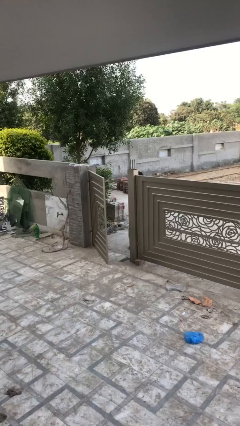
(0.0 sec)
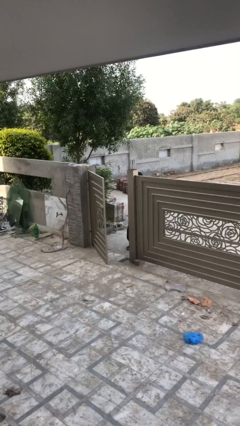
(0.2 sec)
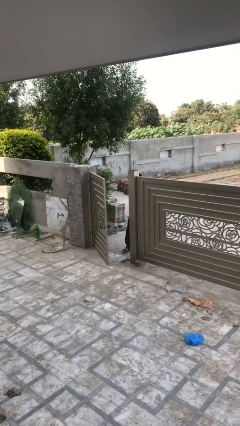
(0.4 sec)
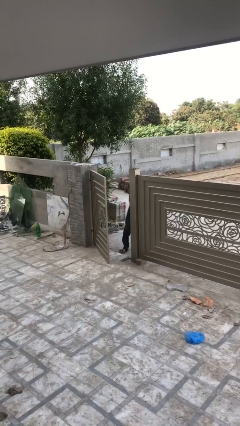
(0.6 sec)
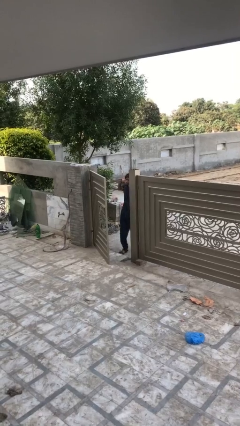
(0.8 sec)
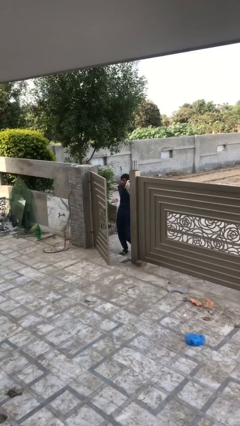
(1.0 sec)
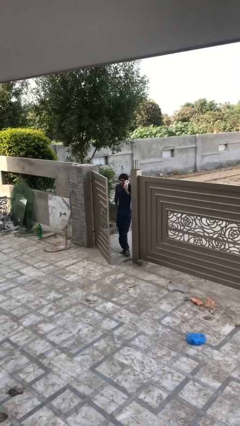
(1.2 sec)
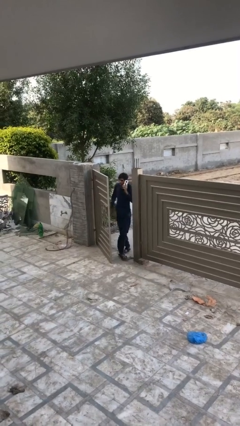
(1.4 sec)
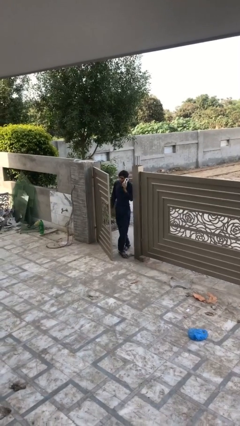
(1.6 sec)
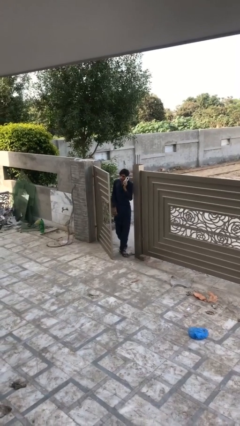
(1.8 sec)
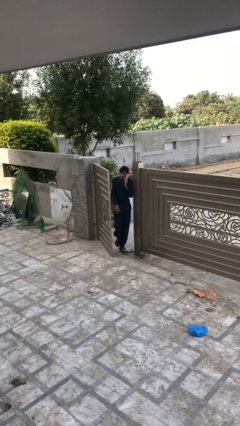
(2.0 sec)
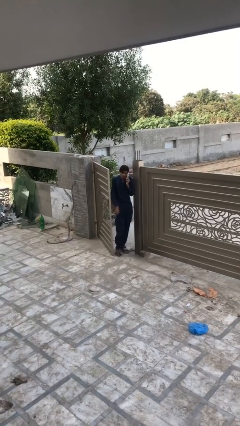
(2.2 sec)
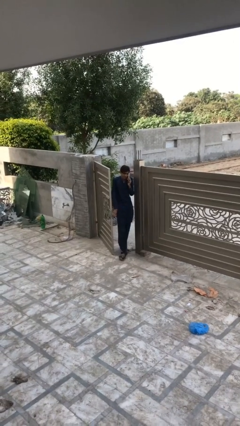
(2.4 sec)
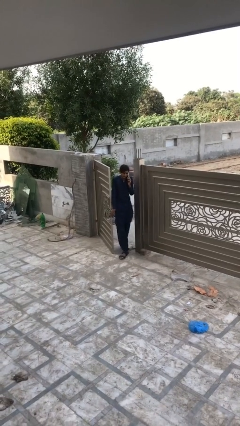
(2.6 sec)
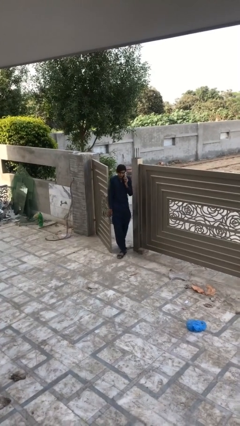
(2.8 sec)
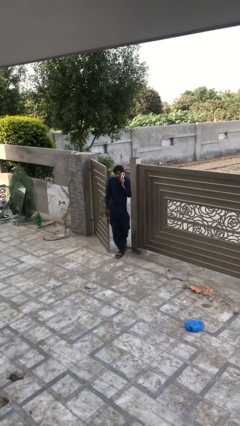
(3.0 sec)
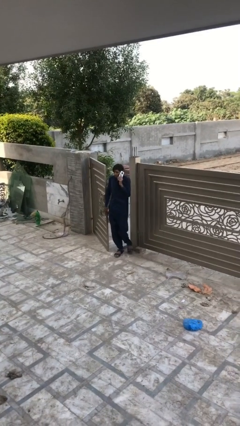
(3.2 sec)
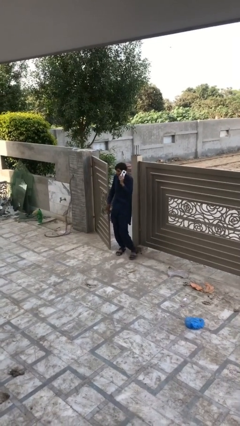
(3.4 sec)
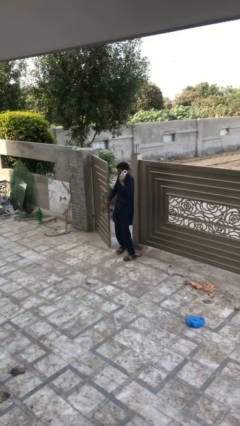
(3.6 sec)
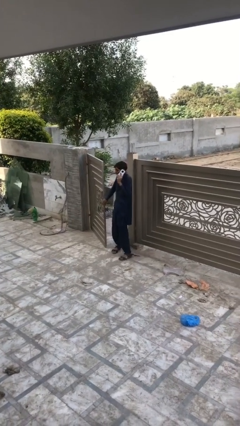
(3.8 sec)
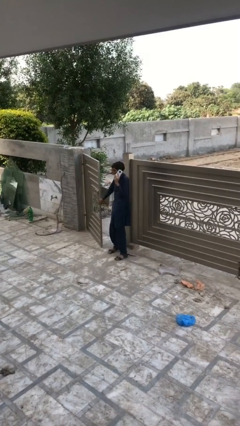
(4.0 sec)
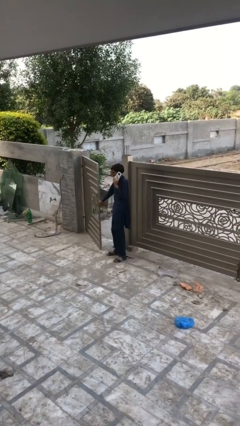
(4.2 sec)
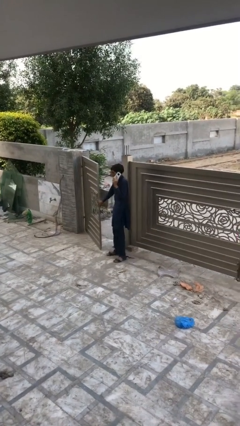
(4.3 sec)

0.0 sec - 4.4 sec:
person enters scene through structure

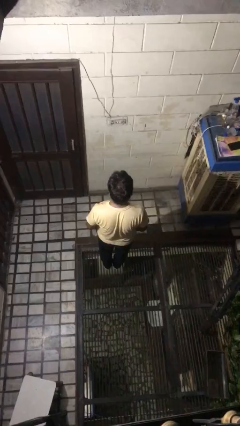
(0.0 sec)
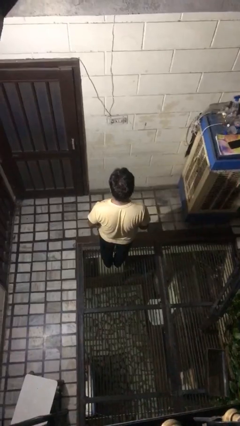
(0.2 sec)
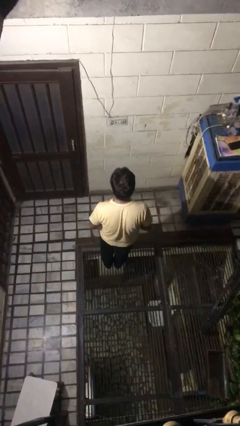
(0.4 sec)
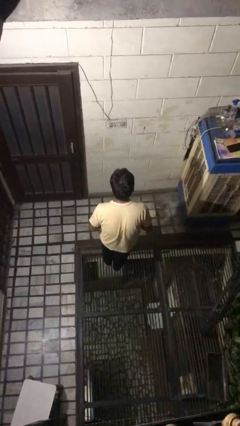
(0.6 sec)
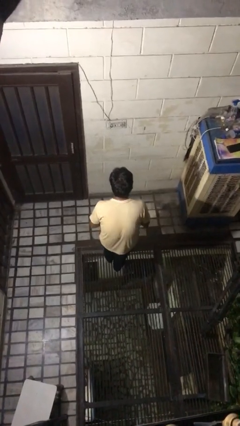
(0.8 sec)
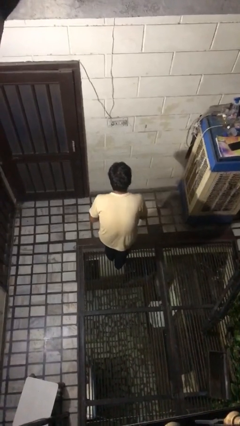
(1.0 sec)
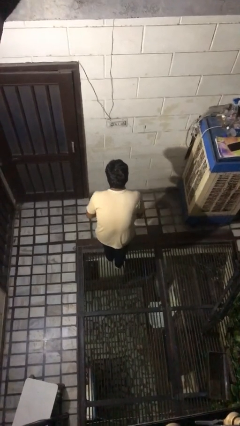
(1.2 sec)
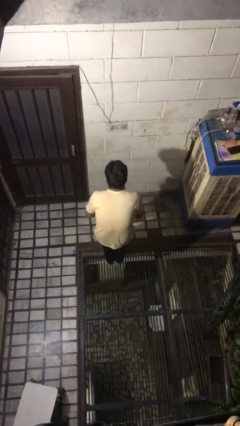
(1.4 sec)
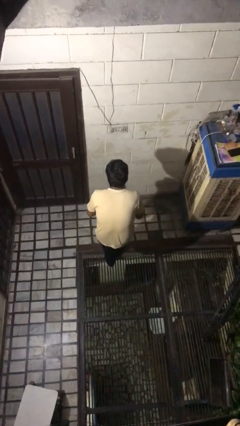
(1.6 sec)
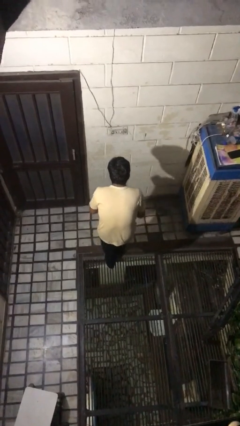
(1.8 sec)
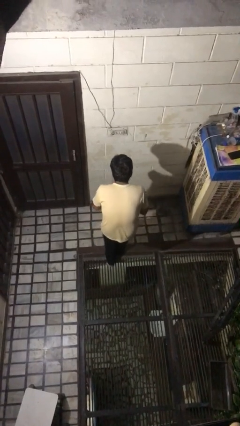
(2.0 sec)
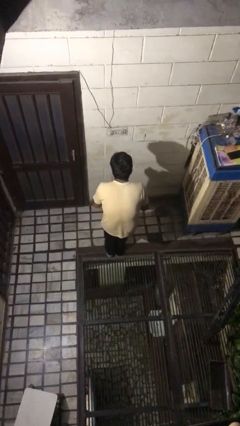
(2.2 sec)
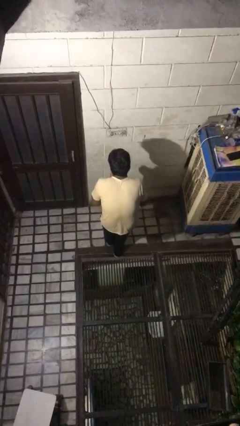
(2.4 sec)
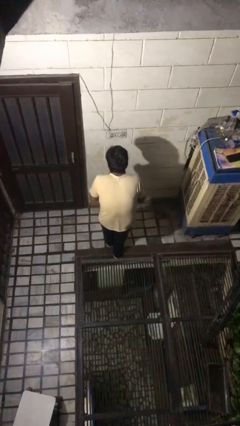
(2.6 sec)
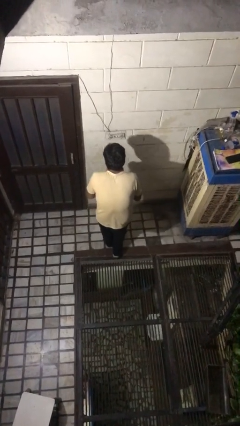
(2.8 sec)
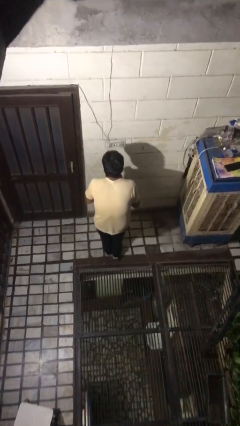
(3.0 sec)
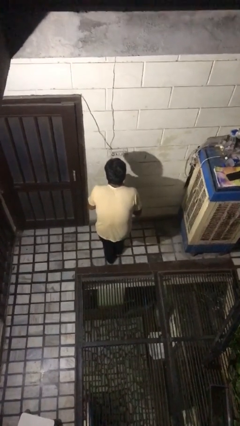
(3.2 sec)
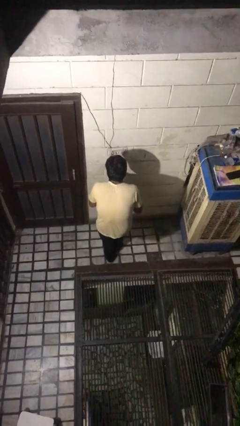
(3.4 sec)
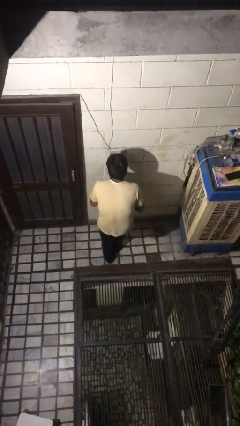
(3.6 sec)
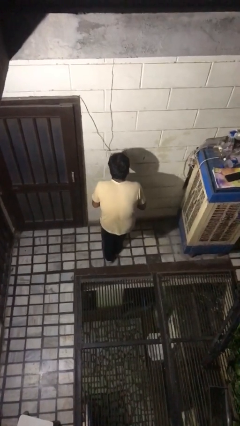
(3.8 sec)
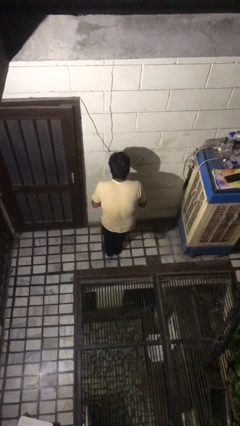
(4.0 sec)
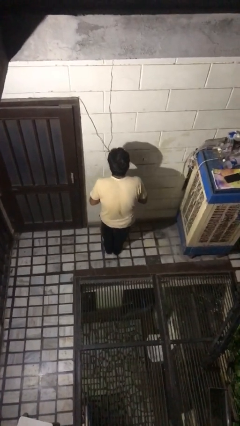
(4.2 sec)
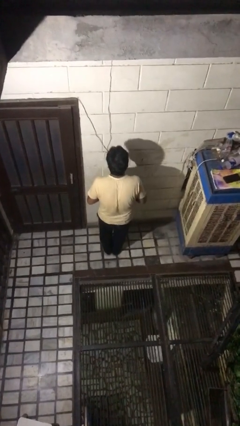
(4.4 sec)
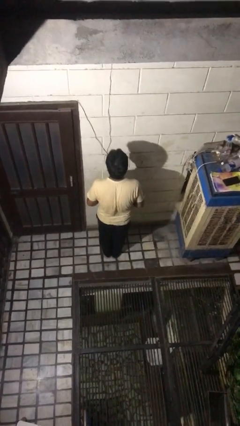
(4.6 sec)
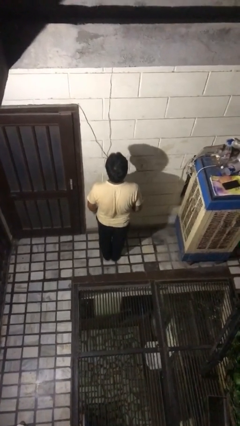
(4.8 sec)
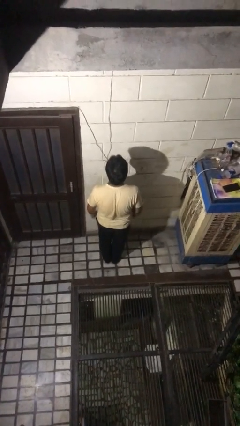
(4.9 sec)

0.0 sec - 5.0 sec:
person walks tiptoe

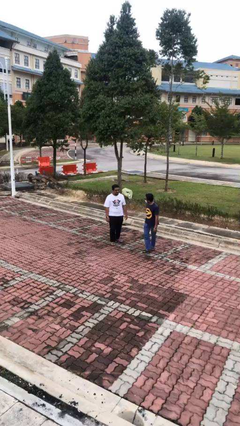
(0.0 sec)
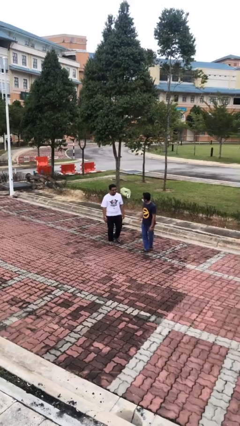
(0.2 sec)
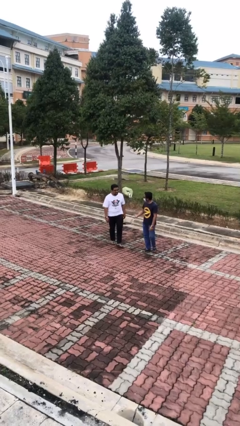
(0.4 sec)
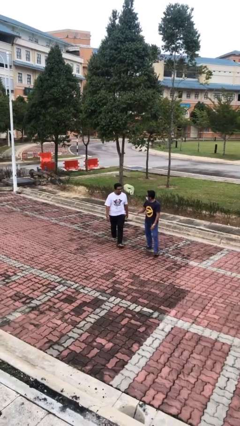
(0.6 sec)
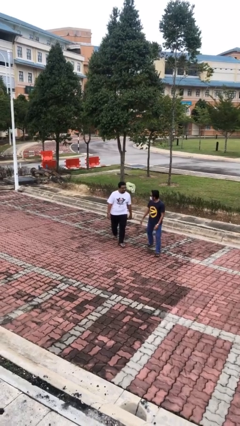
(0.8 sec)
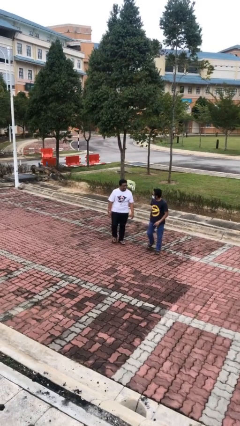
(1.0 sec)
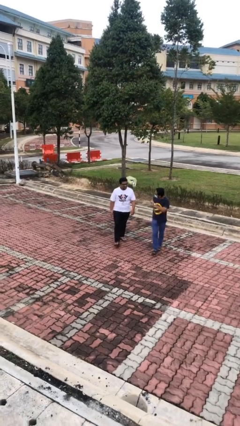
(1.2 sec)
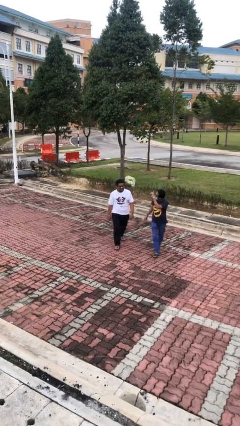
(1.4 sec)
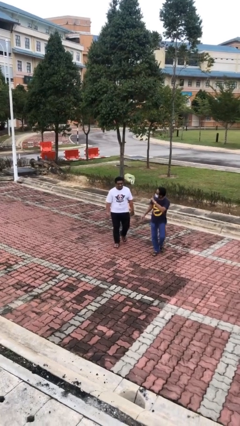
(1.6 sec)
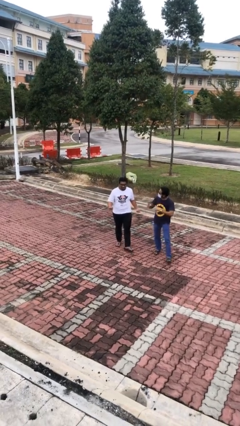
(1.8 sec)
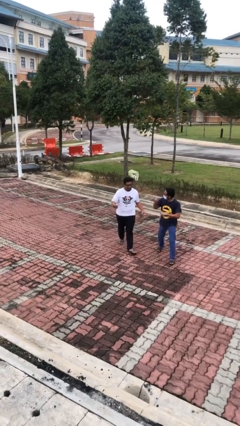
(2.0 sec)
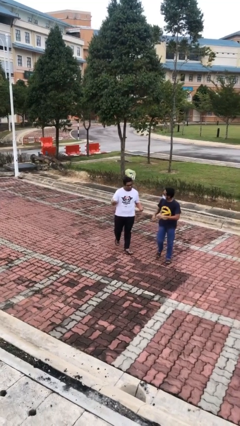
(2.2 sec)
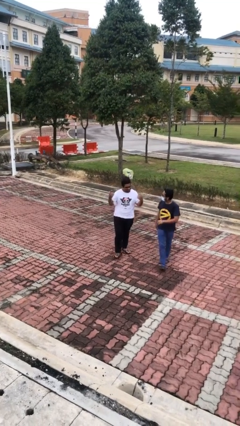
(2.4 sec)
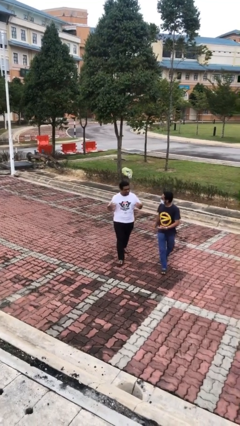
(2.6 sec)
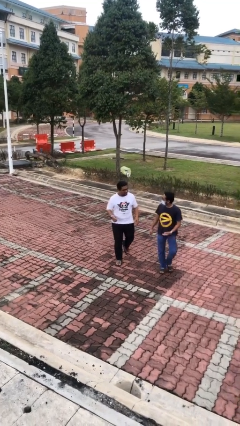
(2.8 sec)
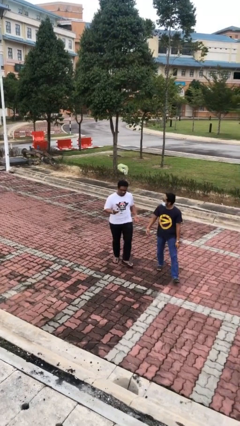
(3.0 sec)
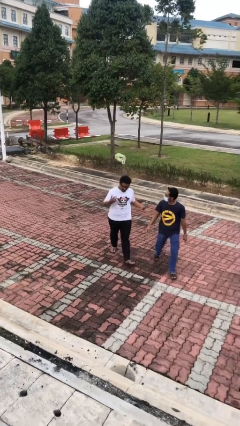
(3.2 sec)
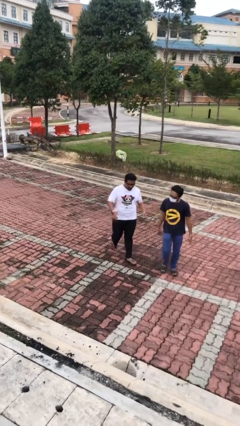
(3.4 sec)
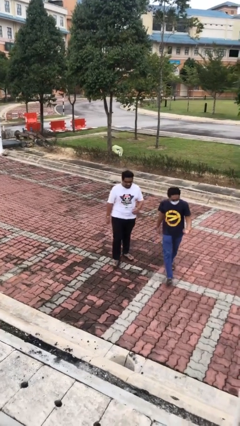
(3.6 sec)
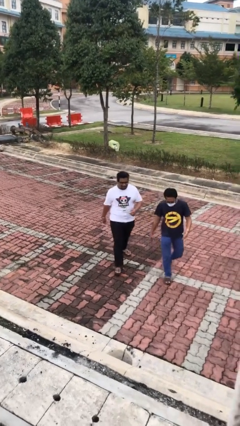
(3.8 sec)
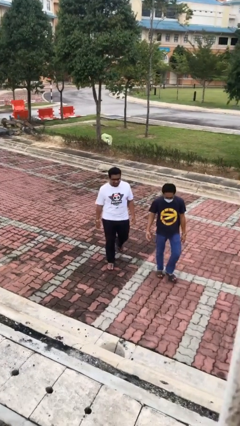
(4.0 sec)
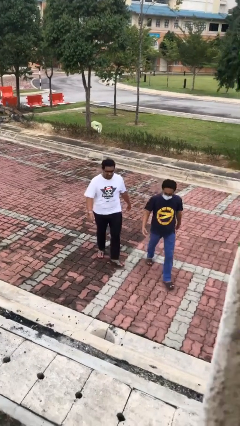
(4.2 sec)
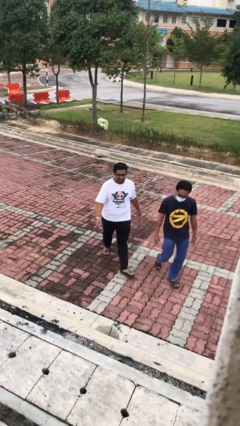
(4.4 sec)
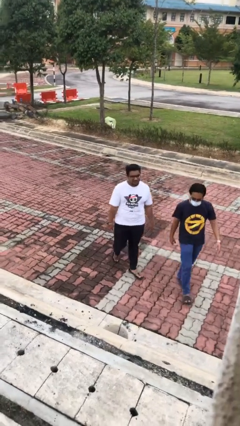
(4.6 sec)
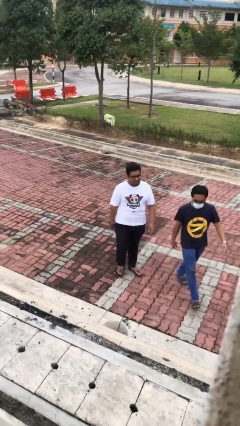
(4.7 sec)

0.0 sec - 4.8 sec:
person talks to person

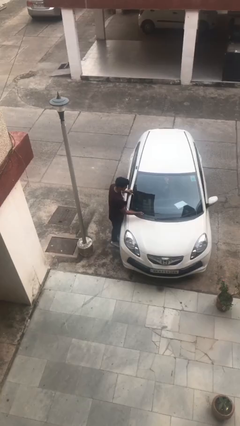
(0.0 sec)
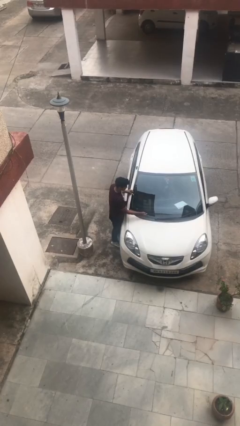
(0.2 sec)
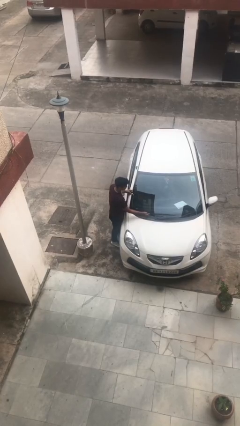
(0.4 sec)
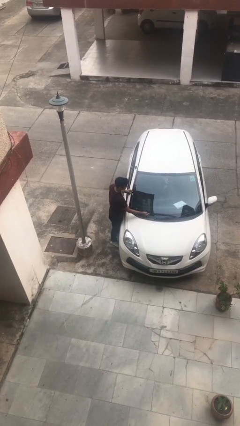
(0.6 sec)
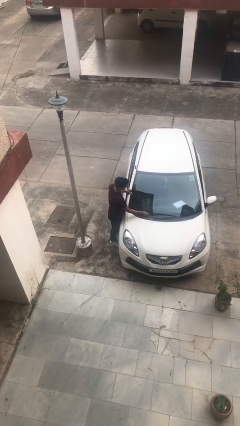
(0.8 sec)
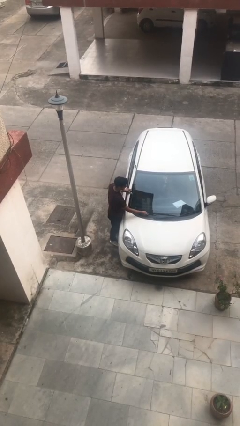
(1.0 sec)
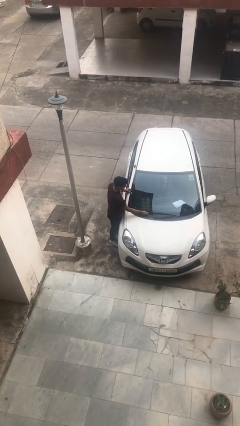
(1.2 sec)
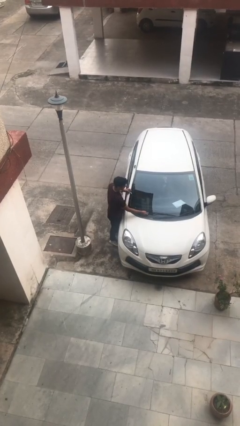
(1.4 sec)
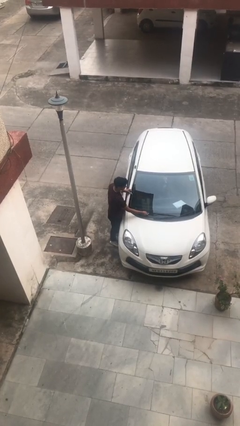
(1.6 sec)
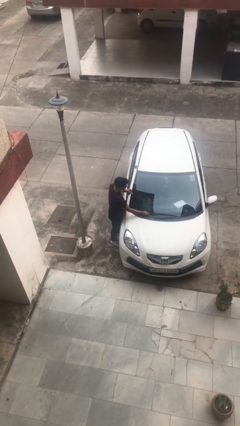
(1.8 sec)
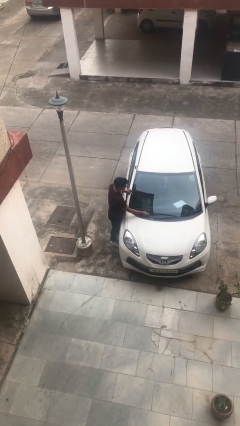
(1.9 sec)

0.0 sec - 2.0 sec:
person flips down car wipers

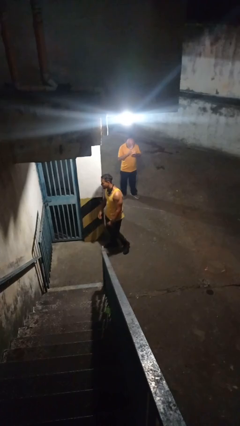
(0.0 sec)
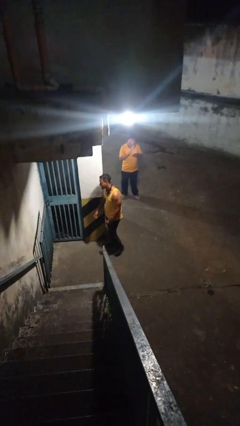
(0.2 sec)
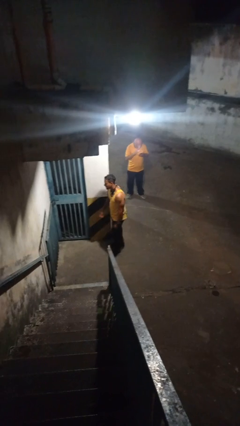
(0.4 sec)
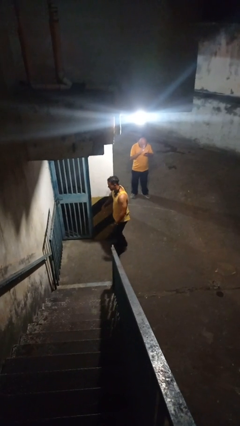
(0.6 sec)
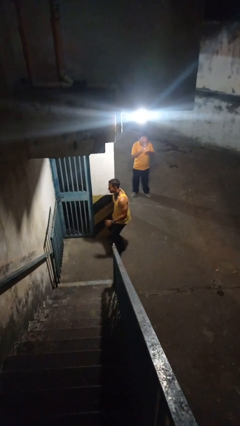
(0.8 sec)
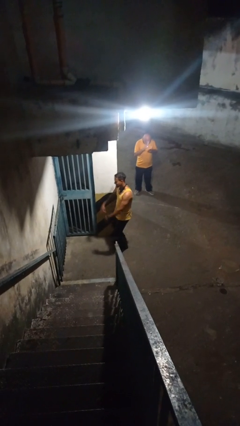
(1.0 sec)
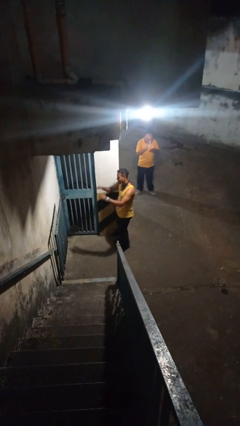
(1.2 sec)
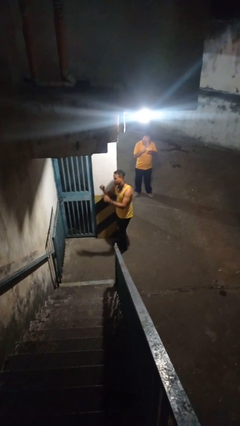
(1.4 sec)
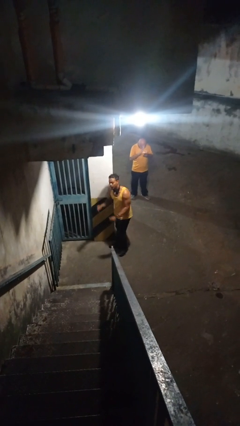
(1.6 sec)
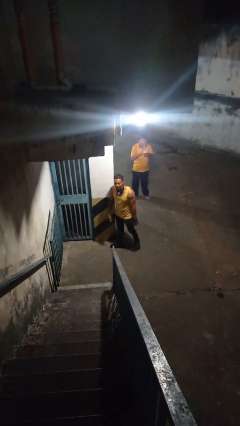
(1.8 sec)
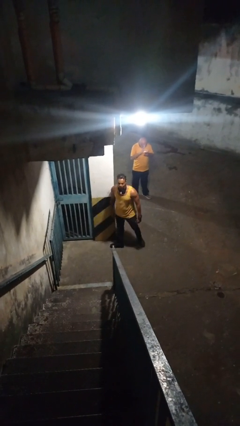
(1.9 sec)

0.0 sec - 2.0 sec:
person slaps hands on thighs
